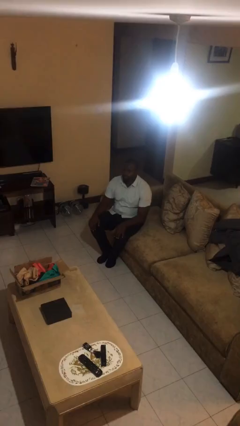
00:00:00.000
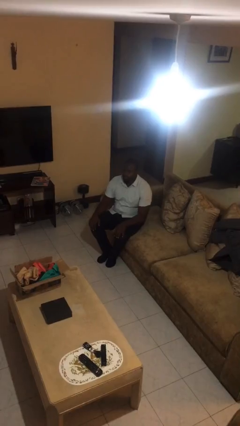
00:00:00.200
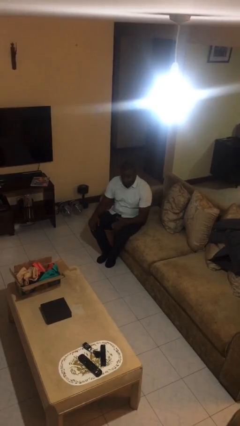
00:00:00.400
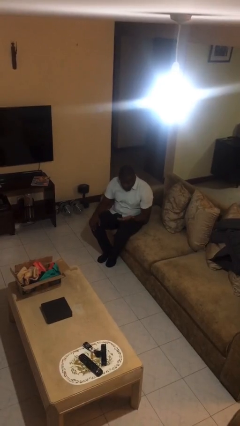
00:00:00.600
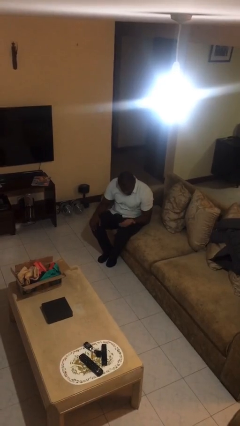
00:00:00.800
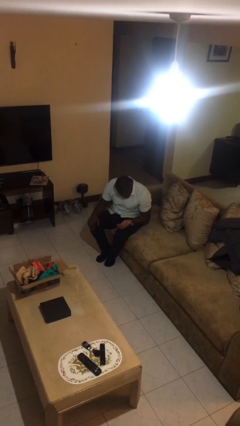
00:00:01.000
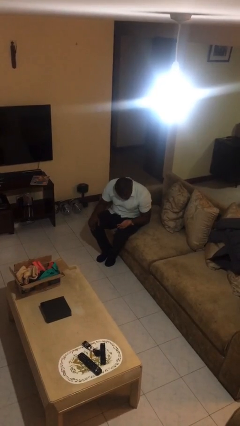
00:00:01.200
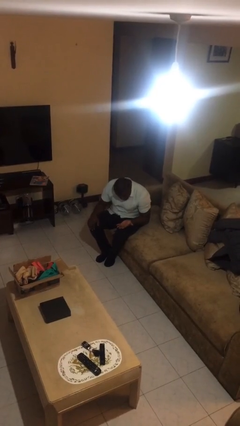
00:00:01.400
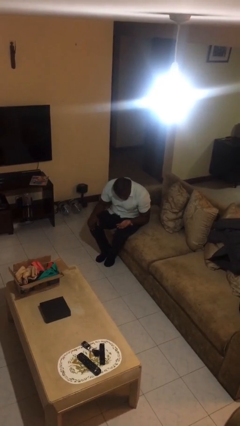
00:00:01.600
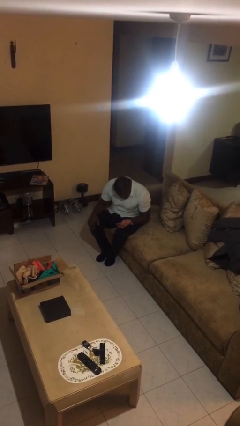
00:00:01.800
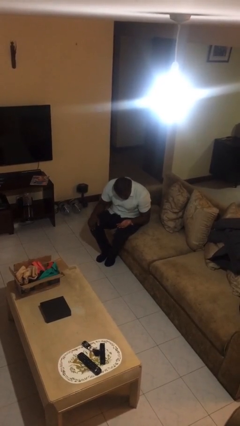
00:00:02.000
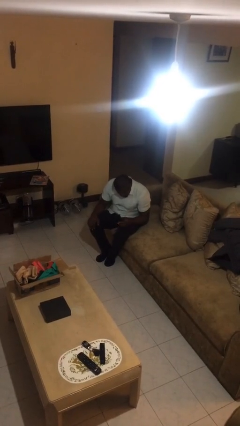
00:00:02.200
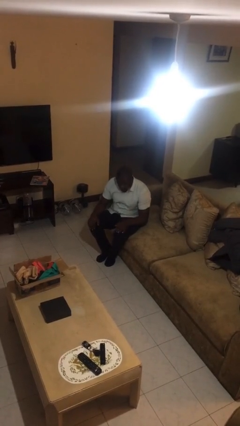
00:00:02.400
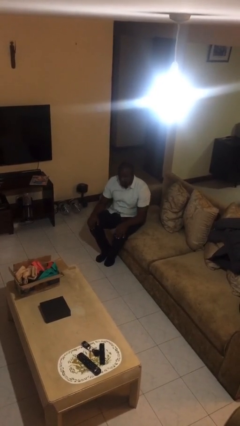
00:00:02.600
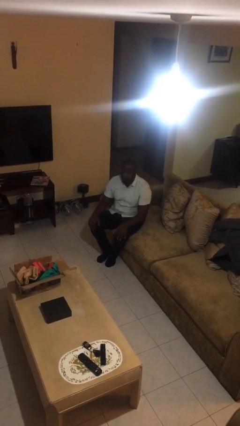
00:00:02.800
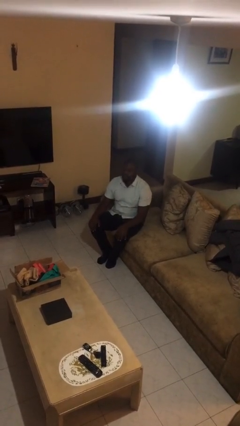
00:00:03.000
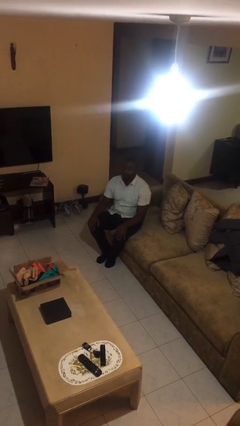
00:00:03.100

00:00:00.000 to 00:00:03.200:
person looks at hands in lap
